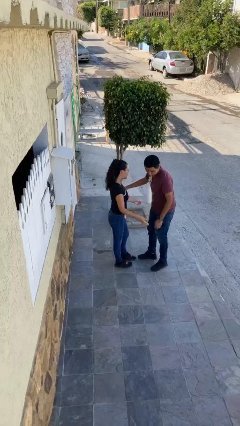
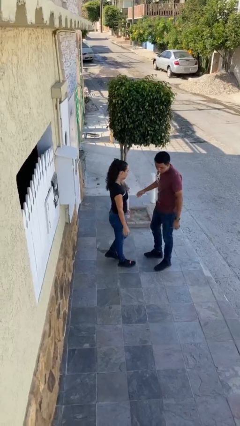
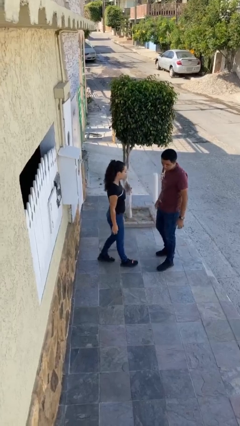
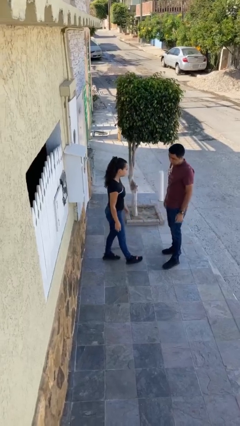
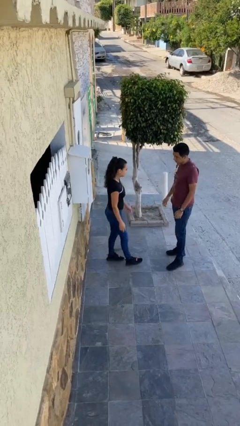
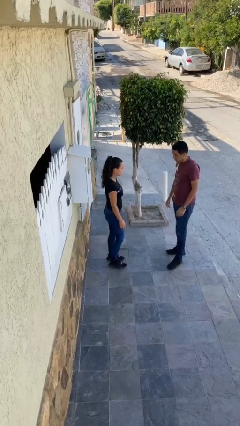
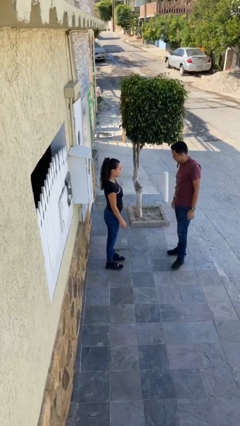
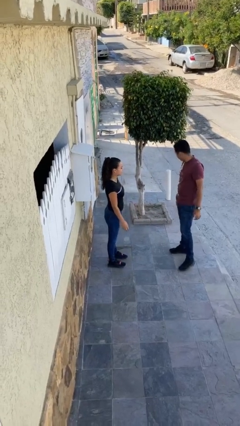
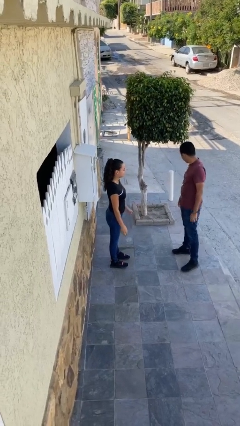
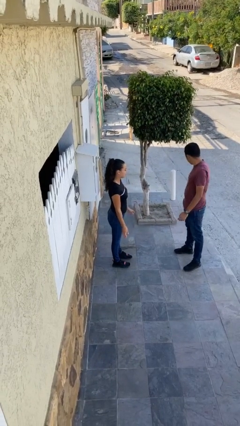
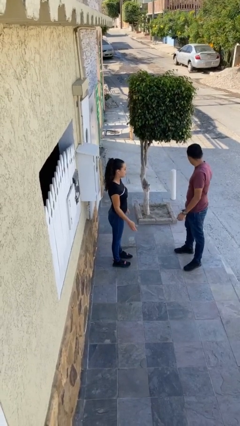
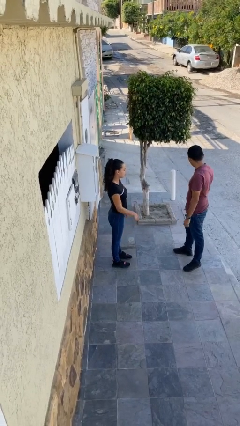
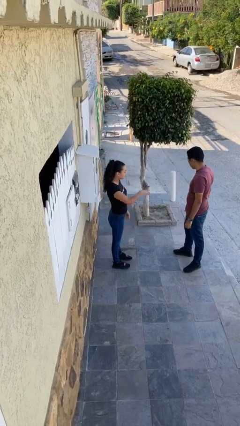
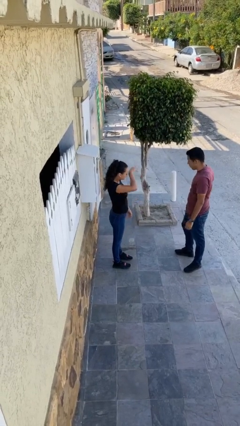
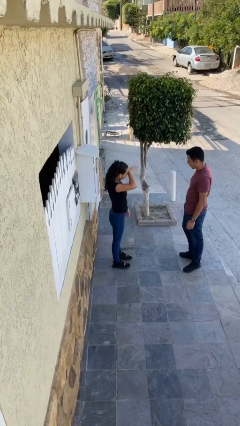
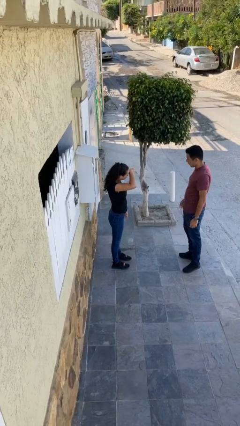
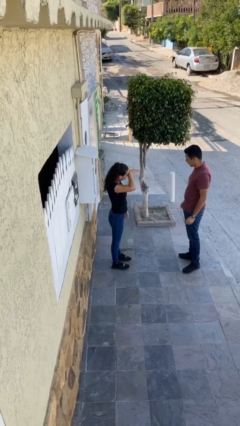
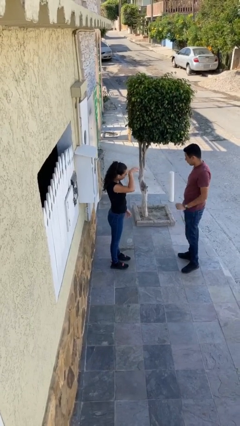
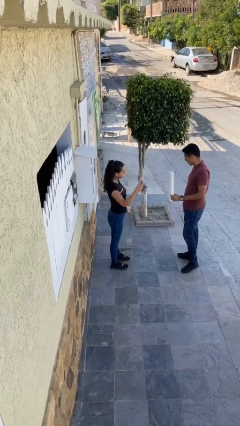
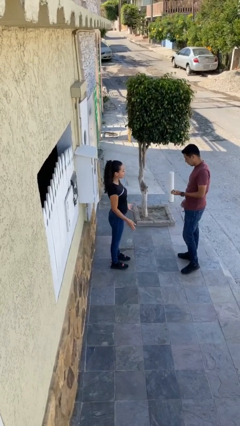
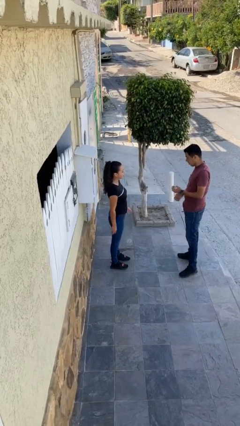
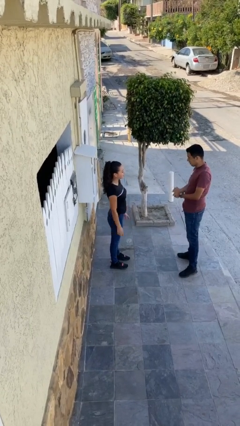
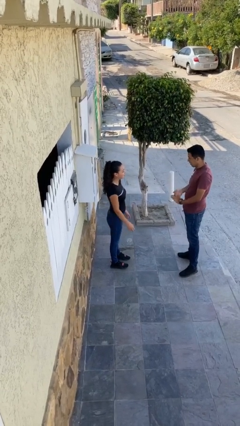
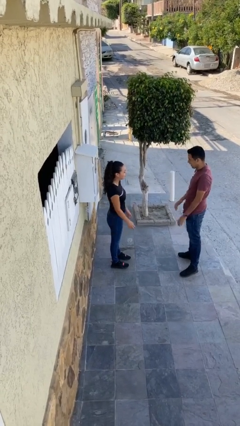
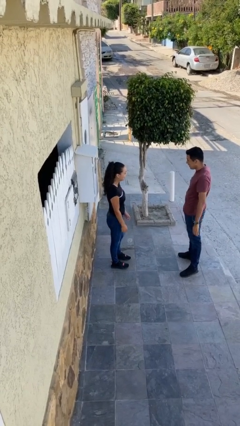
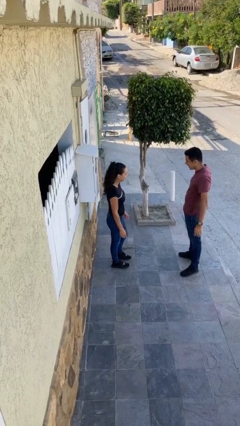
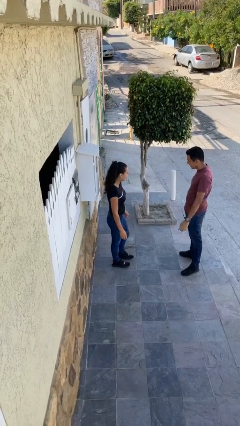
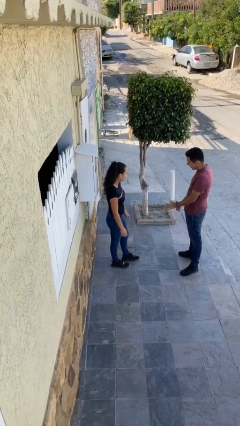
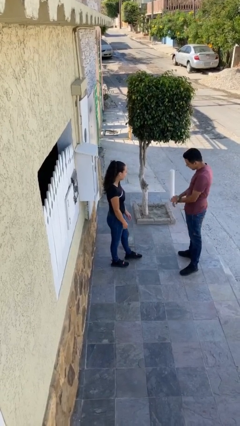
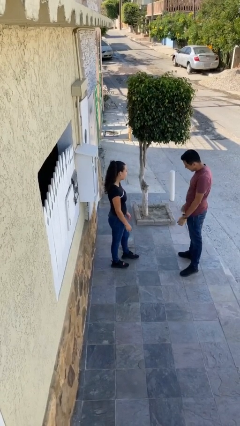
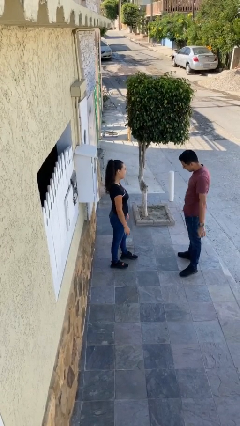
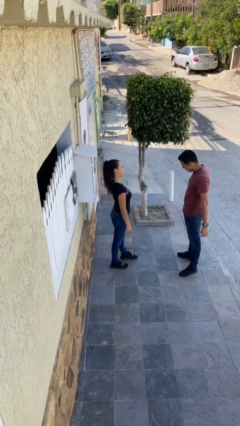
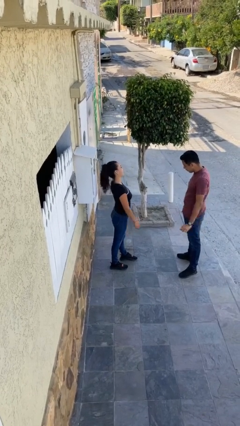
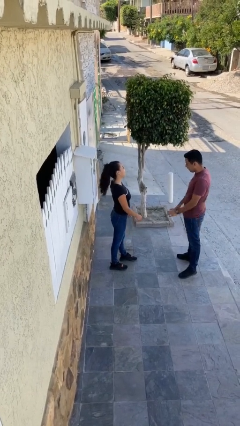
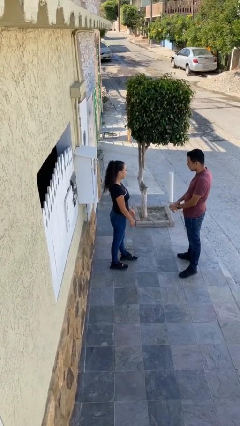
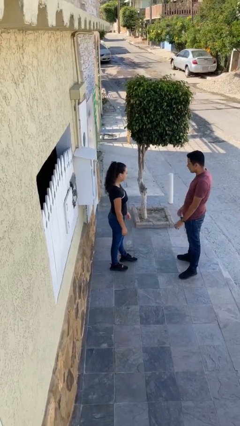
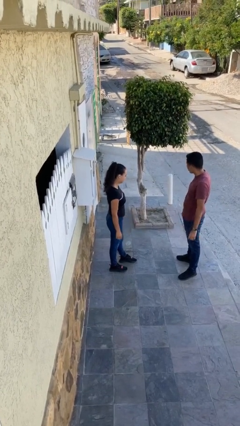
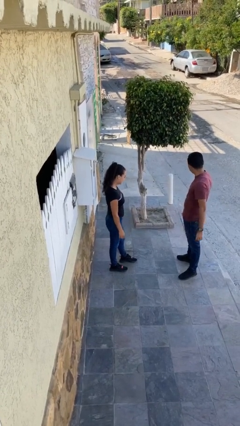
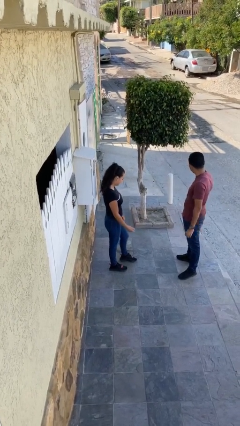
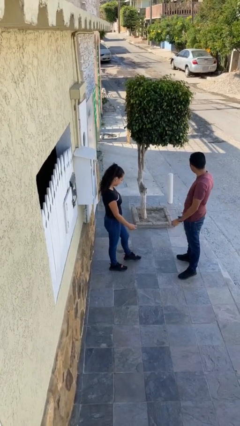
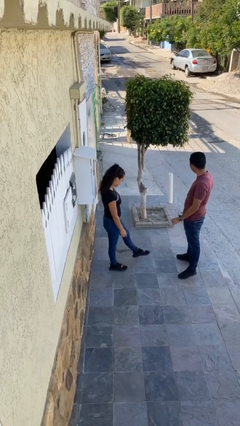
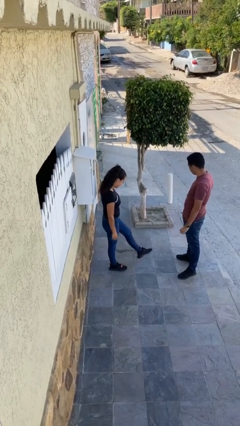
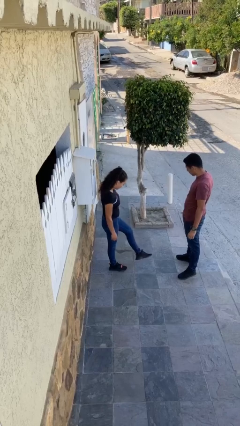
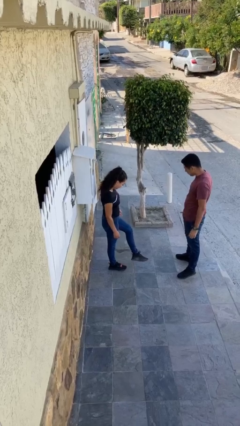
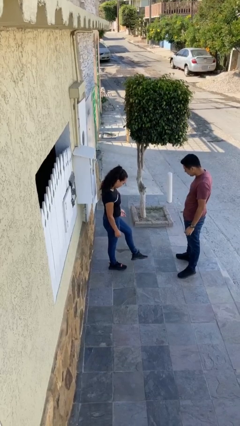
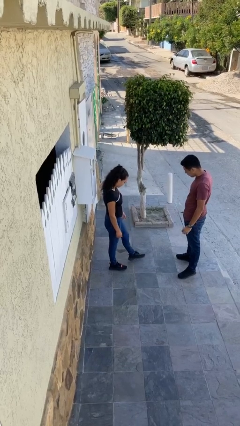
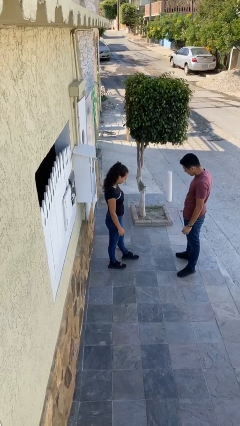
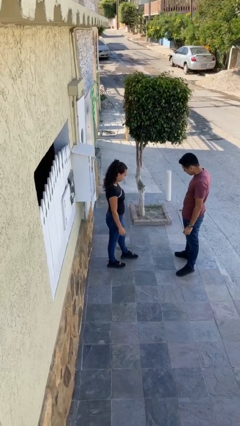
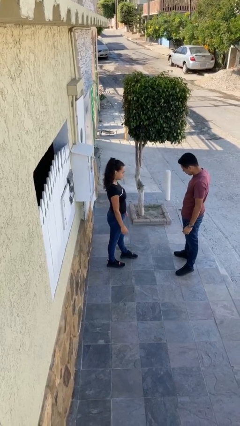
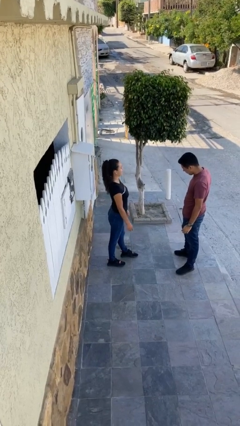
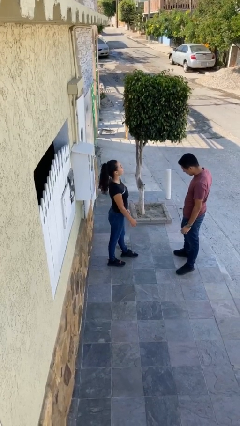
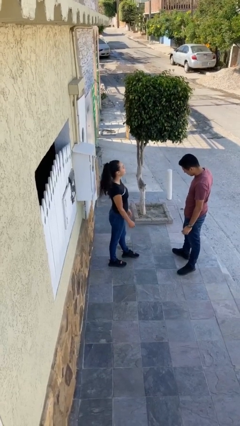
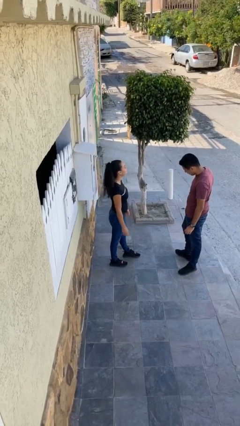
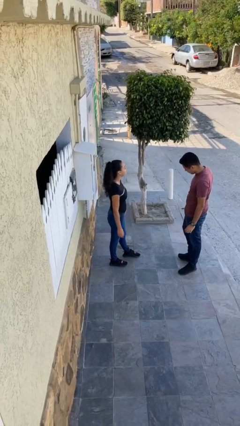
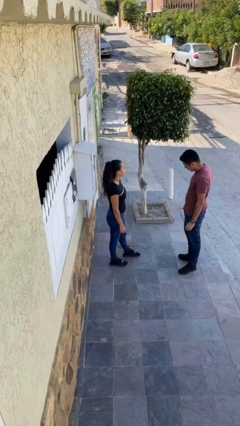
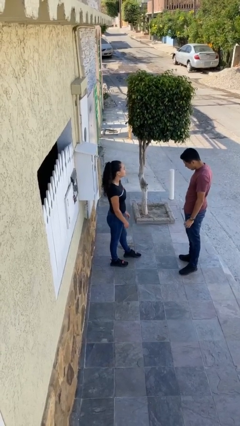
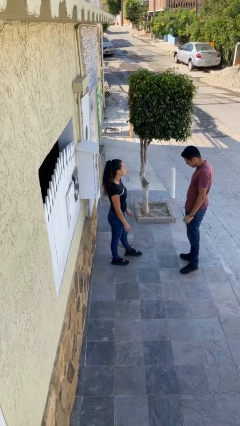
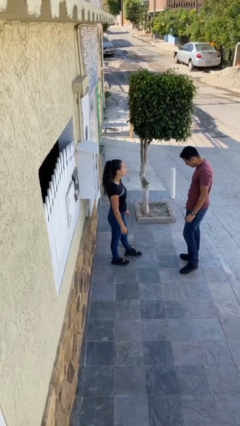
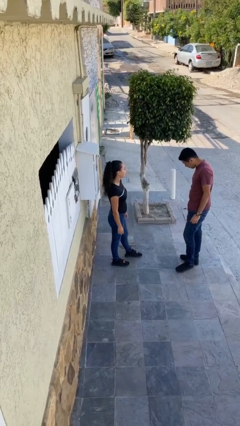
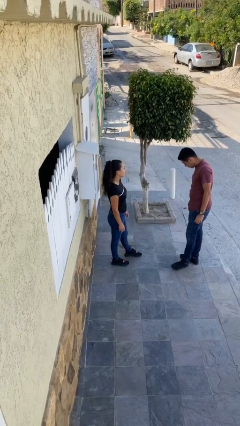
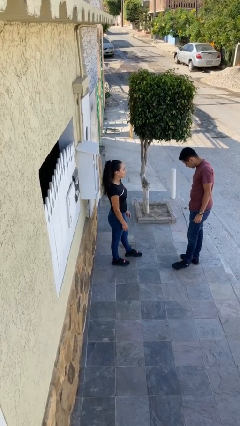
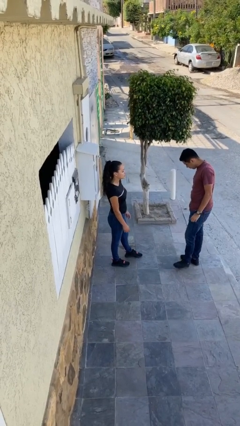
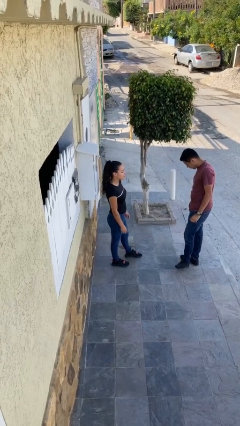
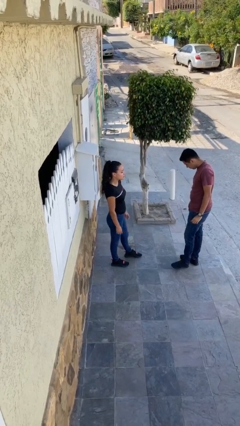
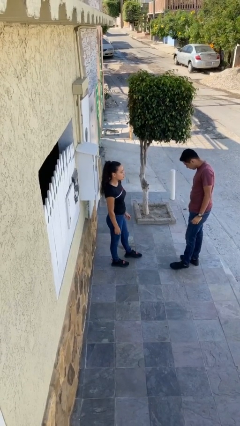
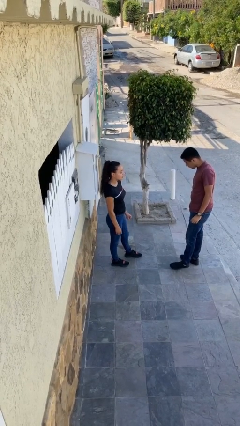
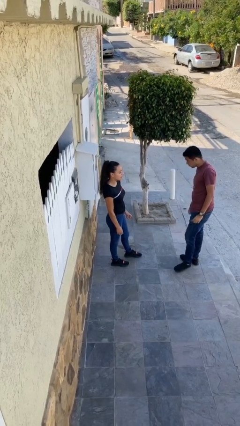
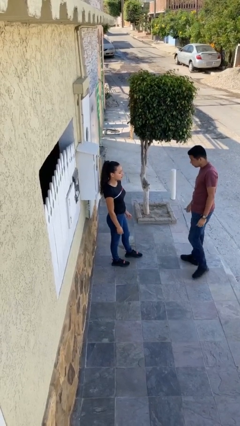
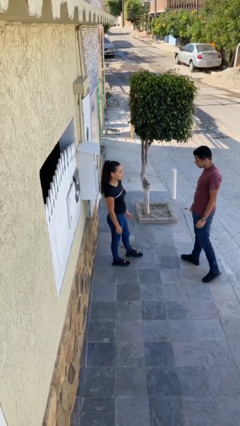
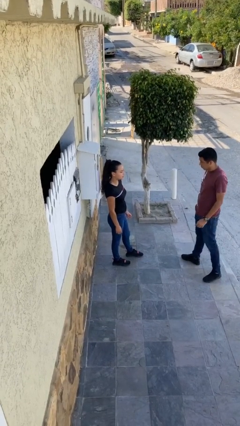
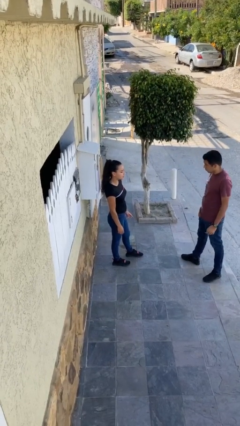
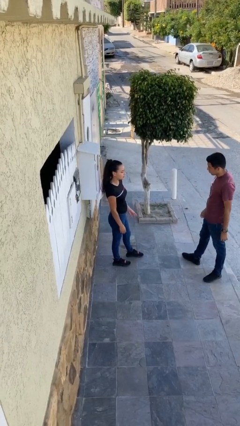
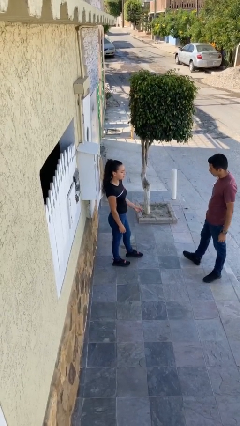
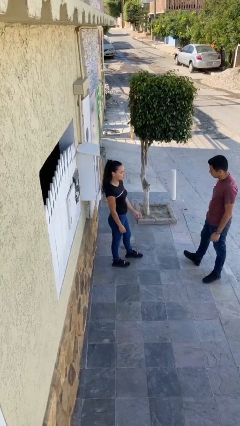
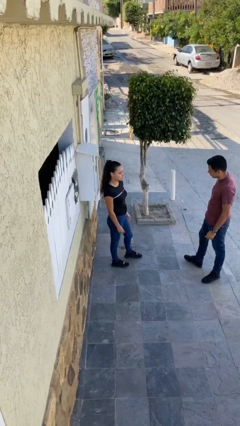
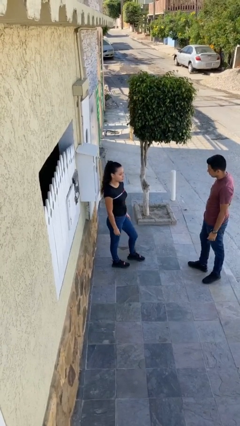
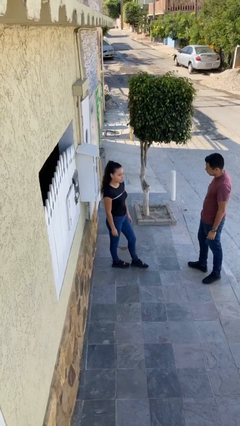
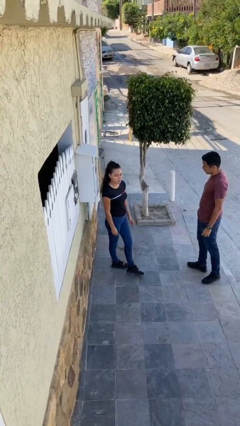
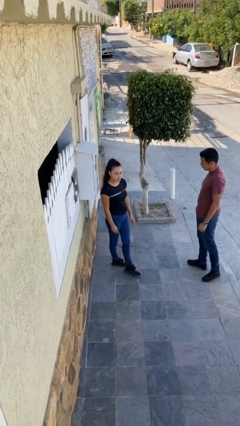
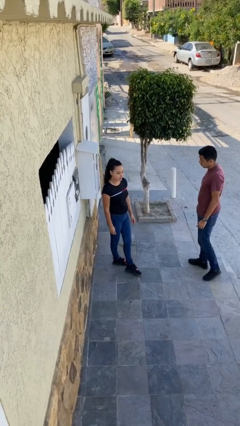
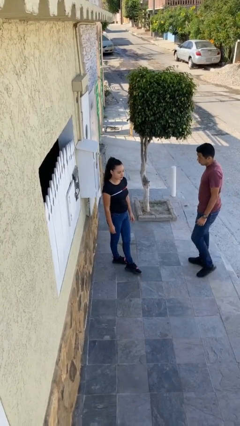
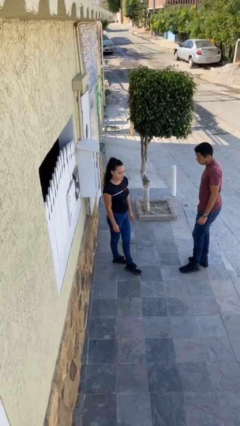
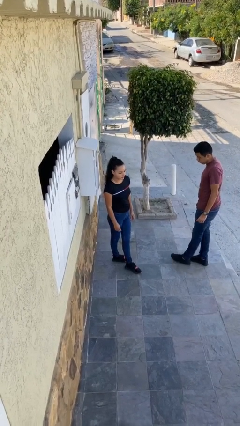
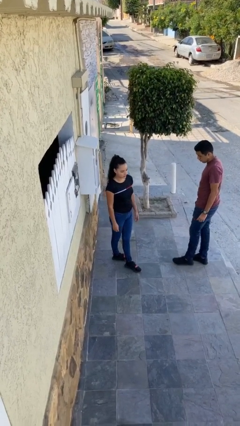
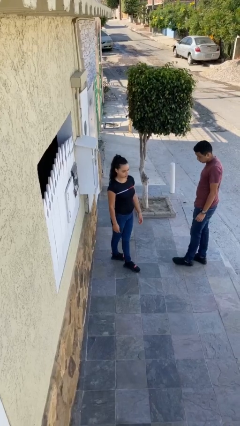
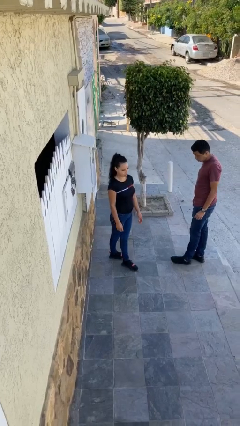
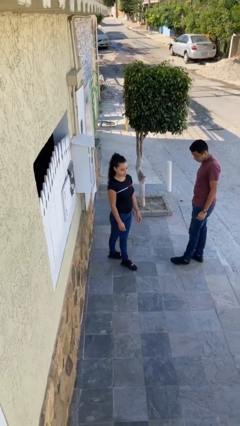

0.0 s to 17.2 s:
person talks to person

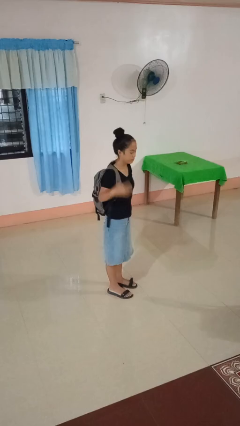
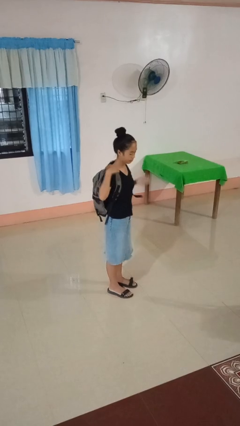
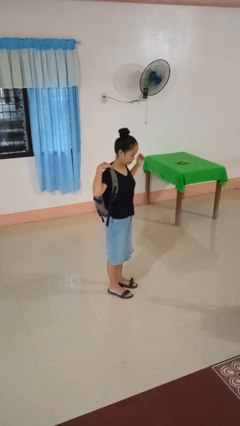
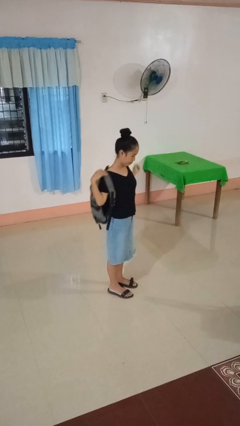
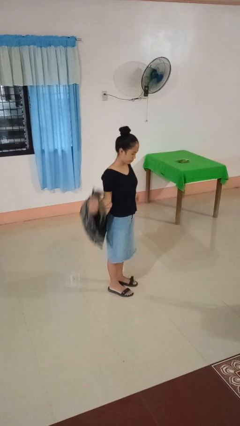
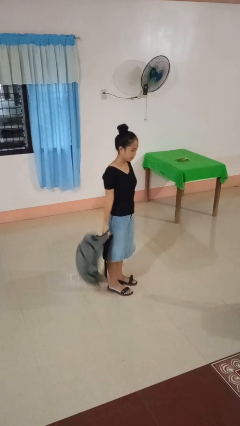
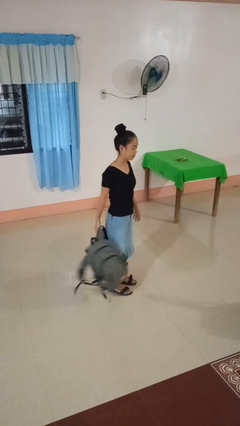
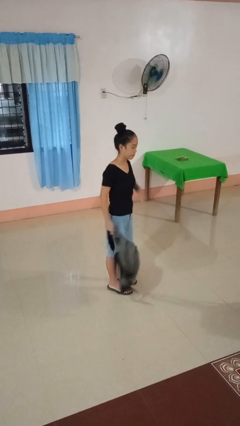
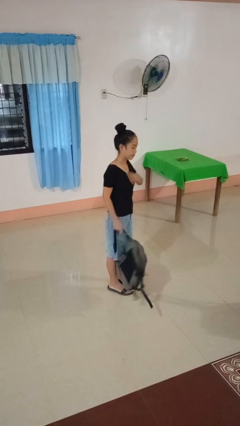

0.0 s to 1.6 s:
person takes off backpack
